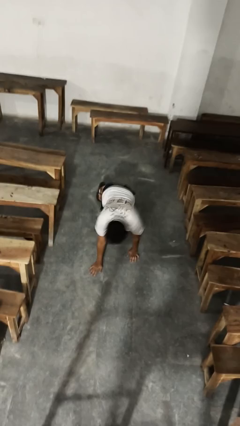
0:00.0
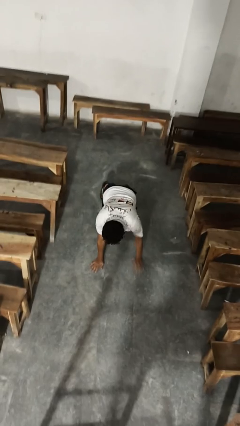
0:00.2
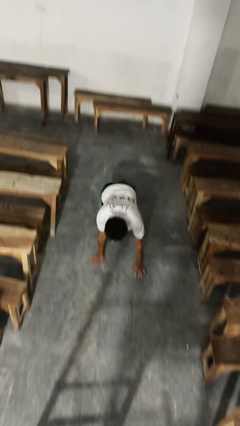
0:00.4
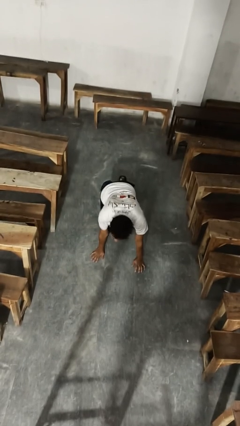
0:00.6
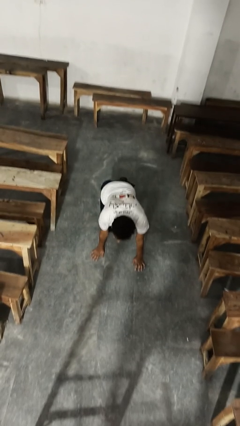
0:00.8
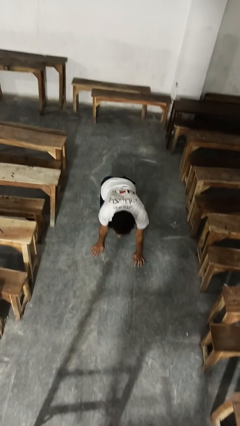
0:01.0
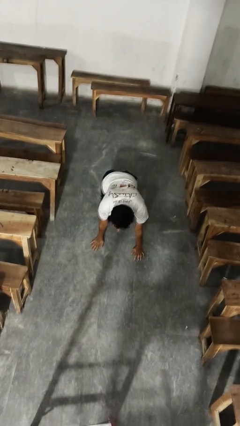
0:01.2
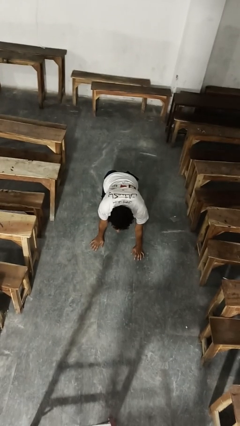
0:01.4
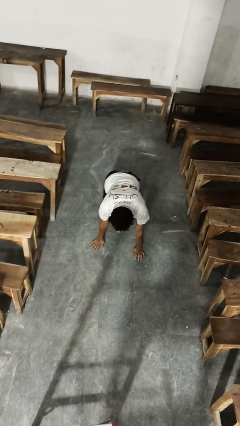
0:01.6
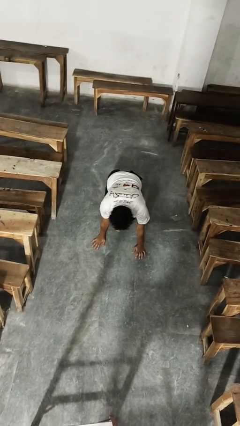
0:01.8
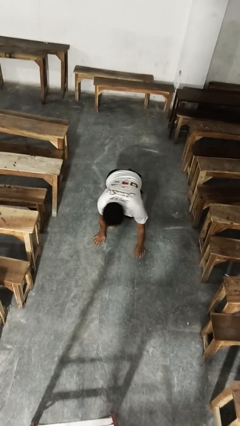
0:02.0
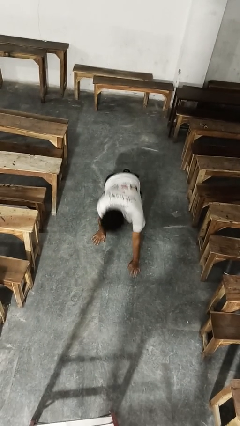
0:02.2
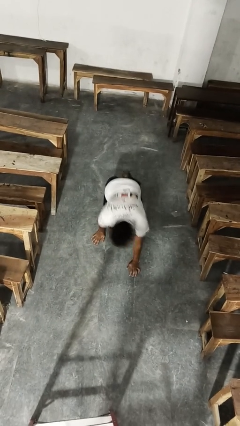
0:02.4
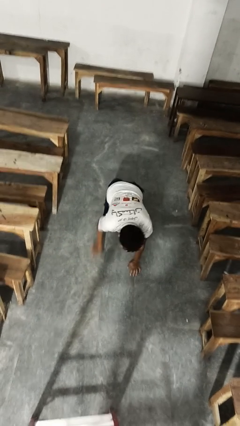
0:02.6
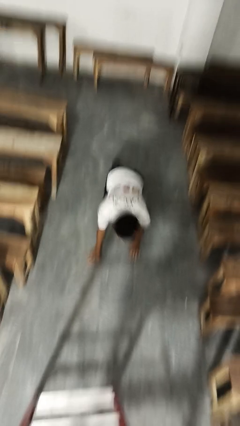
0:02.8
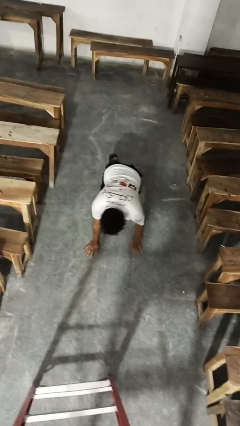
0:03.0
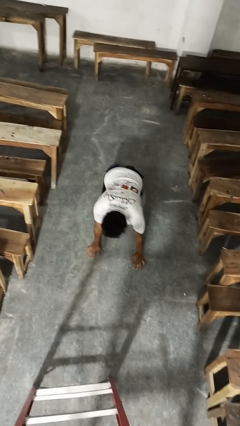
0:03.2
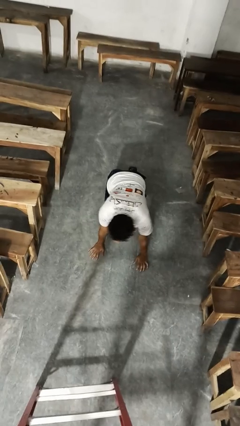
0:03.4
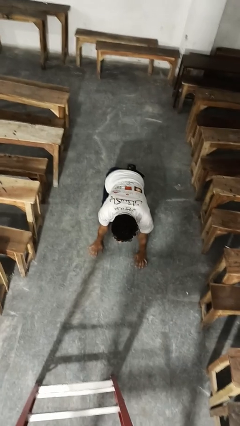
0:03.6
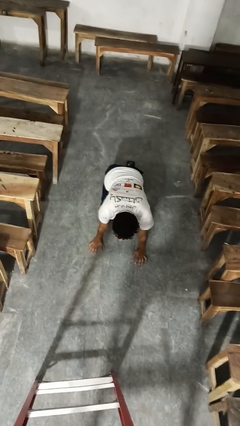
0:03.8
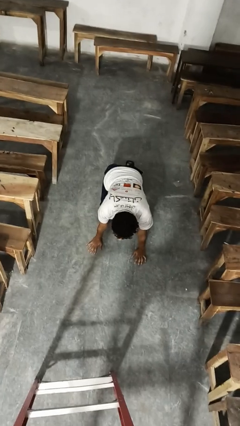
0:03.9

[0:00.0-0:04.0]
person crawls

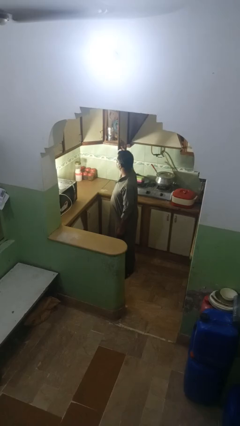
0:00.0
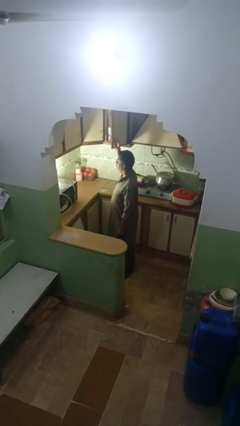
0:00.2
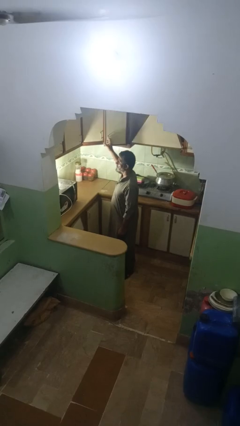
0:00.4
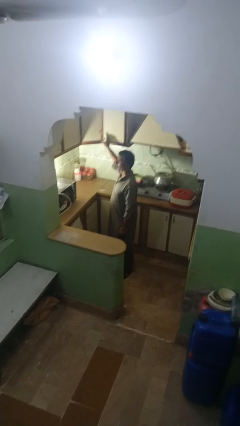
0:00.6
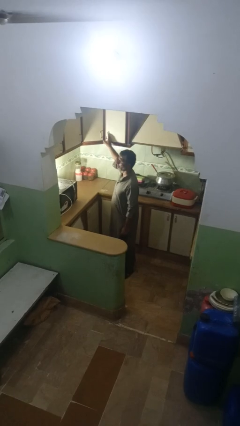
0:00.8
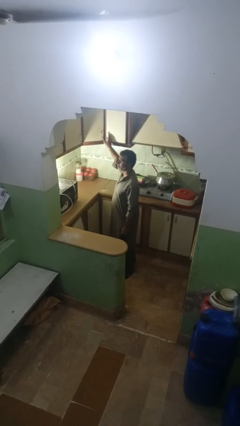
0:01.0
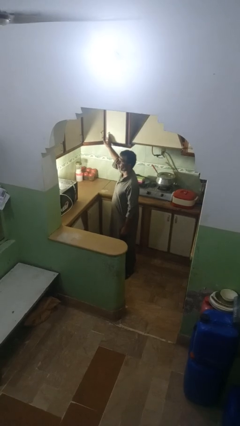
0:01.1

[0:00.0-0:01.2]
person closes kitchen drawer

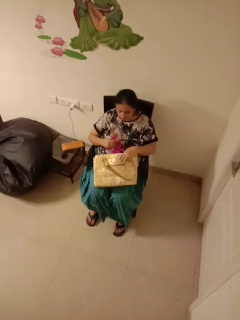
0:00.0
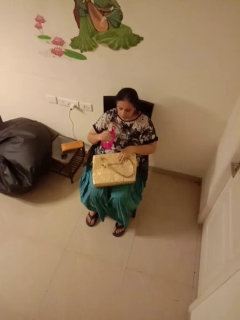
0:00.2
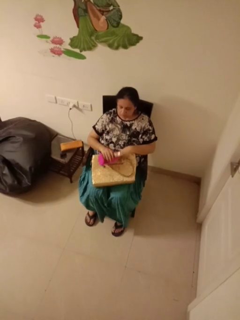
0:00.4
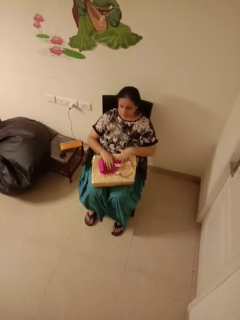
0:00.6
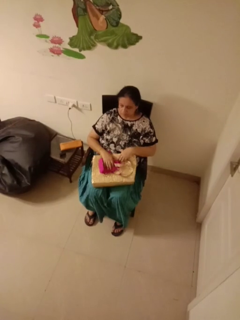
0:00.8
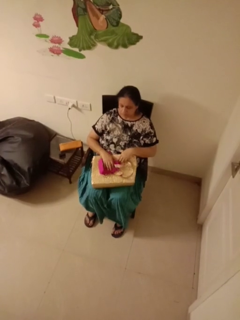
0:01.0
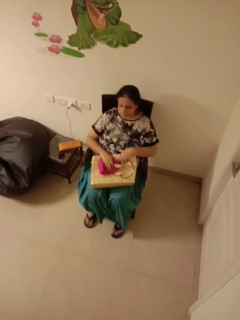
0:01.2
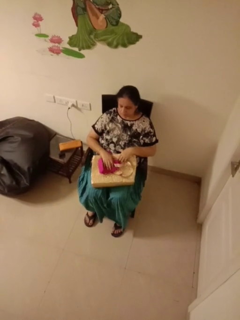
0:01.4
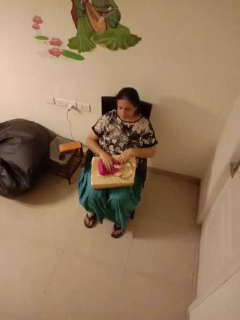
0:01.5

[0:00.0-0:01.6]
person takes object from purse

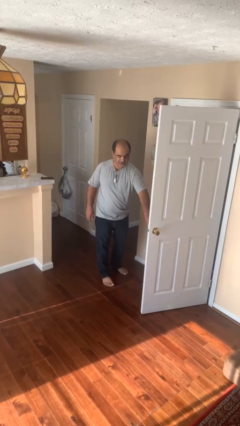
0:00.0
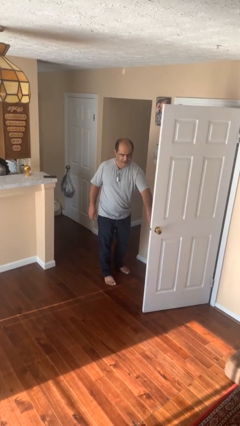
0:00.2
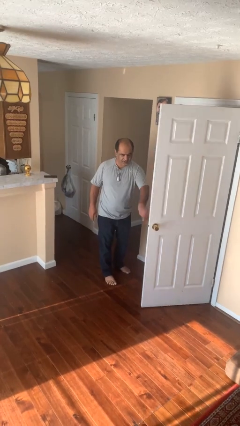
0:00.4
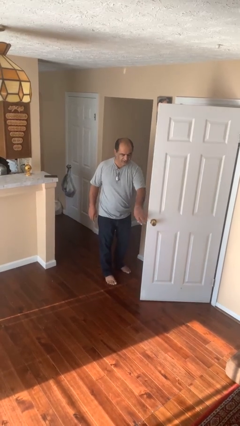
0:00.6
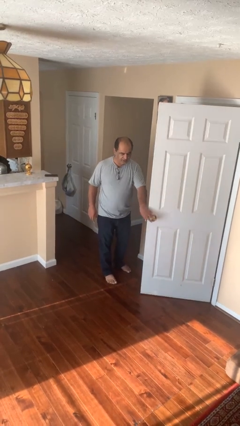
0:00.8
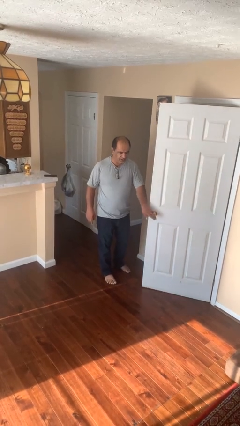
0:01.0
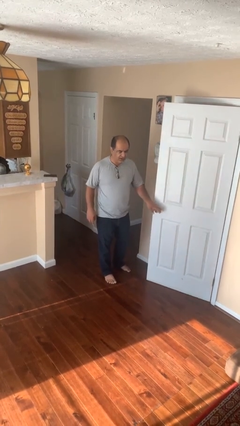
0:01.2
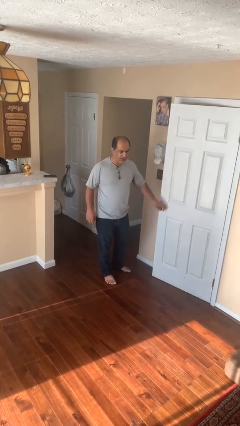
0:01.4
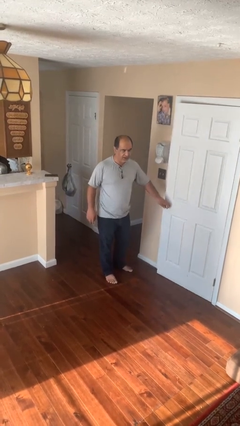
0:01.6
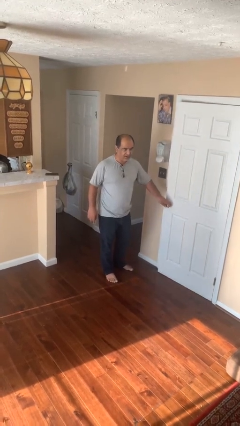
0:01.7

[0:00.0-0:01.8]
person closes facility door

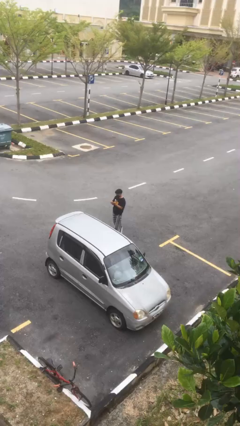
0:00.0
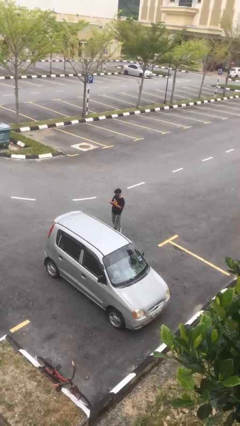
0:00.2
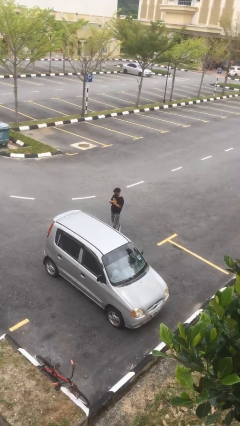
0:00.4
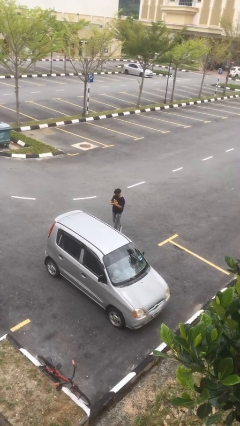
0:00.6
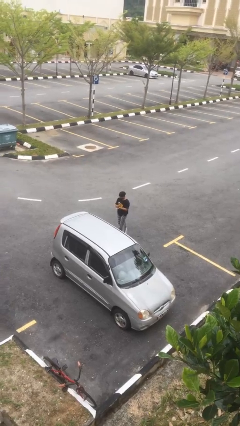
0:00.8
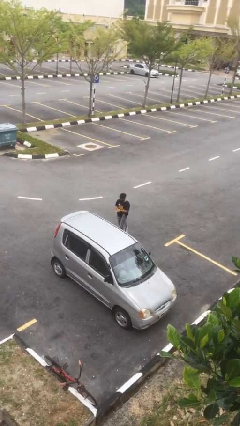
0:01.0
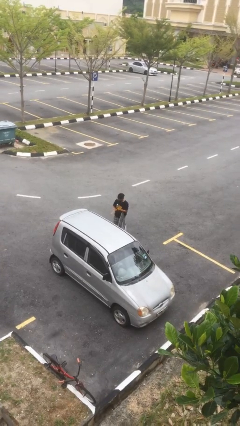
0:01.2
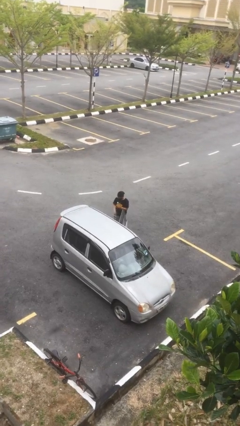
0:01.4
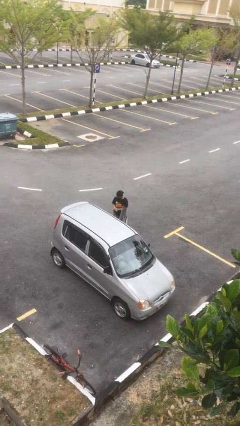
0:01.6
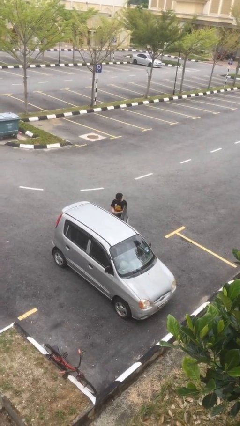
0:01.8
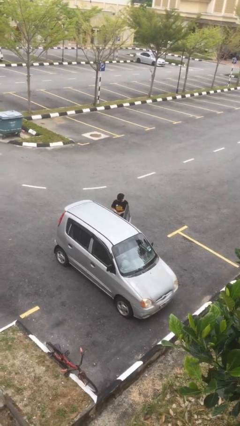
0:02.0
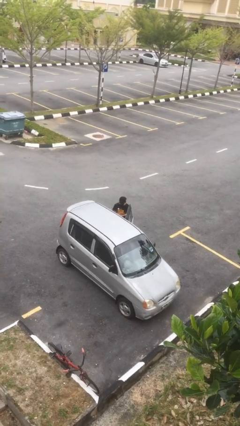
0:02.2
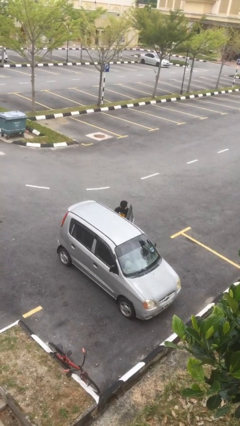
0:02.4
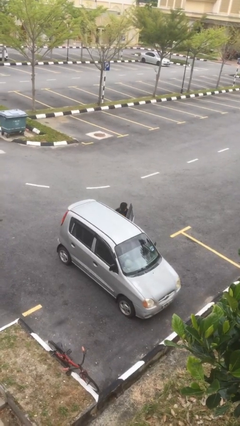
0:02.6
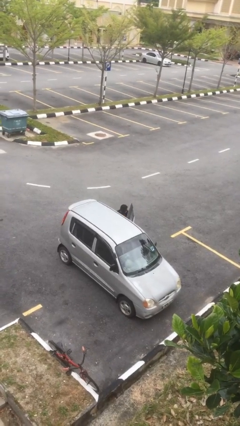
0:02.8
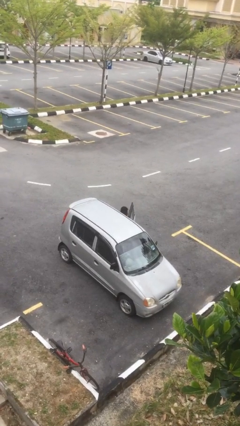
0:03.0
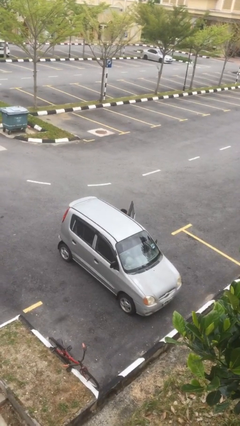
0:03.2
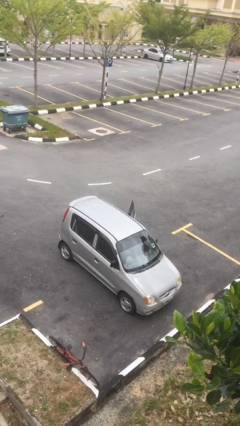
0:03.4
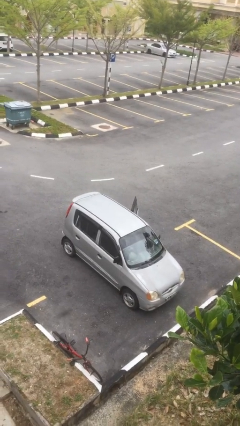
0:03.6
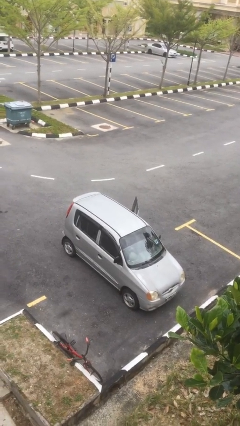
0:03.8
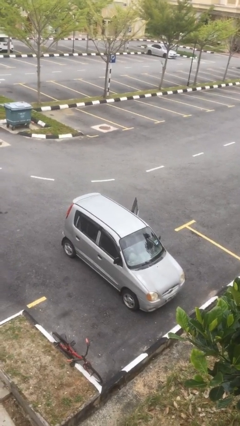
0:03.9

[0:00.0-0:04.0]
person enters car

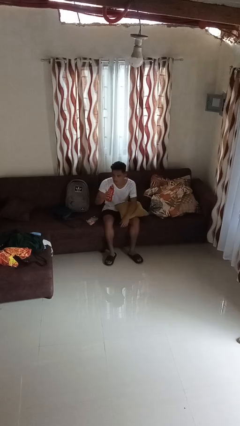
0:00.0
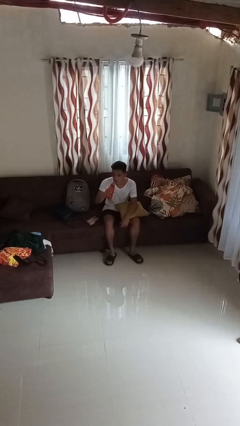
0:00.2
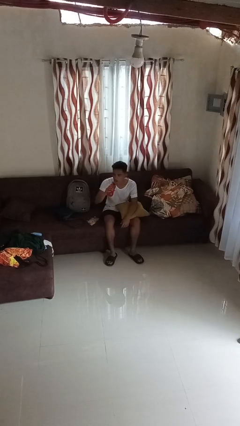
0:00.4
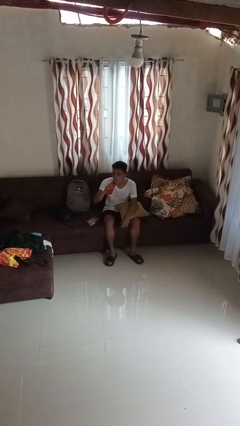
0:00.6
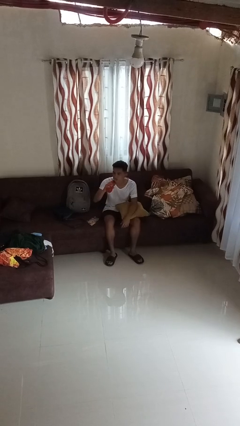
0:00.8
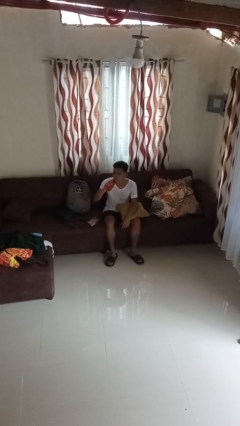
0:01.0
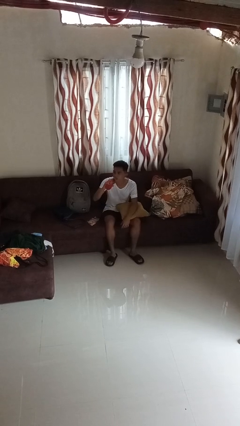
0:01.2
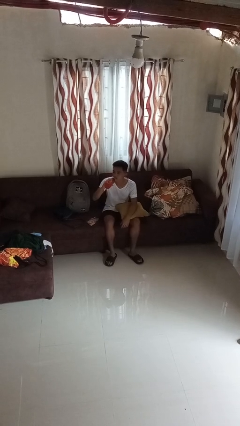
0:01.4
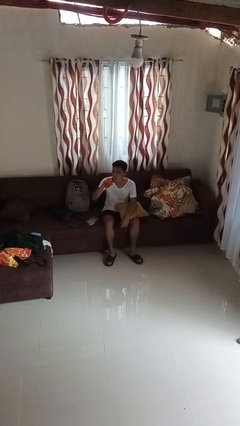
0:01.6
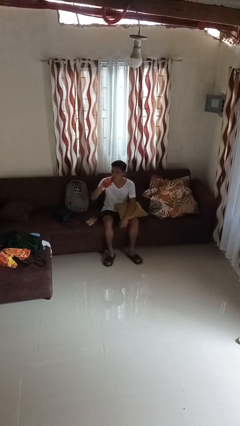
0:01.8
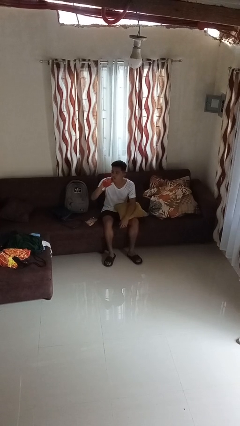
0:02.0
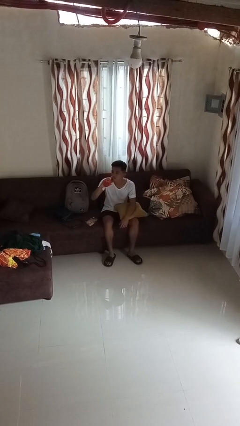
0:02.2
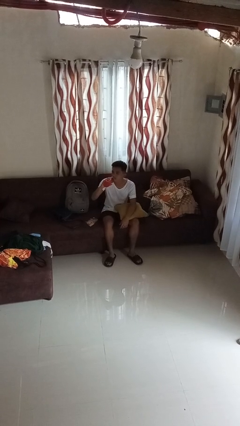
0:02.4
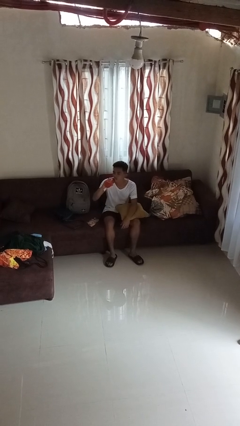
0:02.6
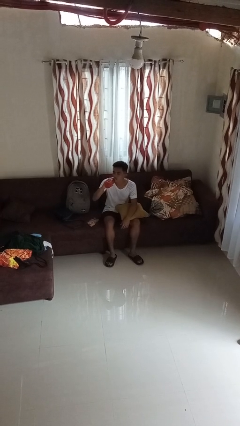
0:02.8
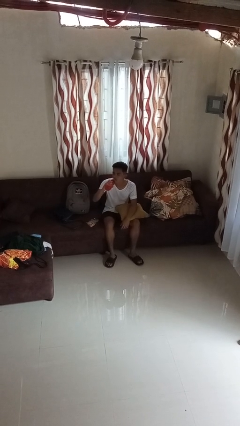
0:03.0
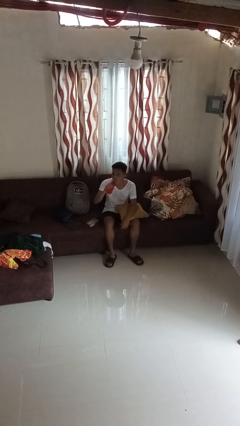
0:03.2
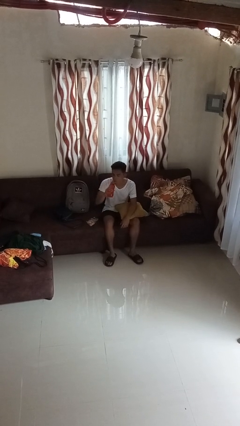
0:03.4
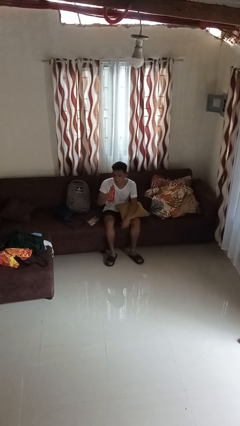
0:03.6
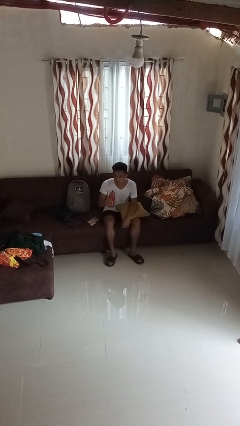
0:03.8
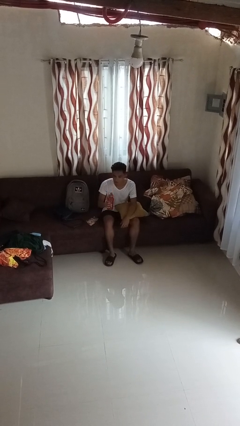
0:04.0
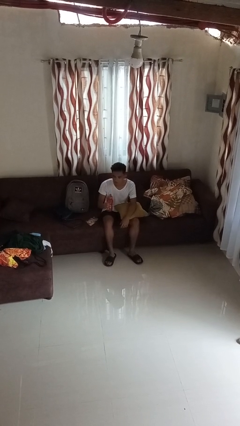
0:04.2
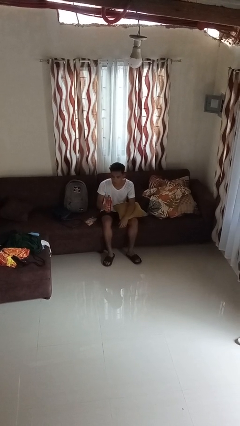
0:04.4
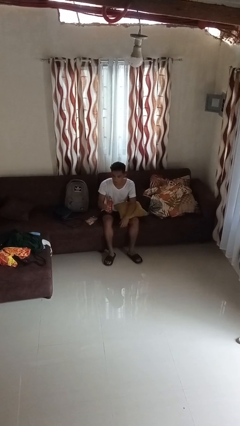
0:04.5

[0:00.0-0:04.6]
person drinks from bottle

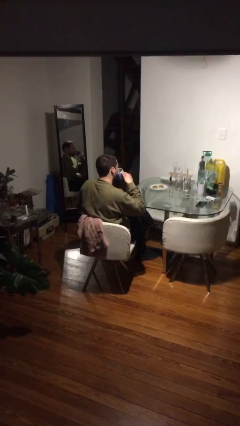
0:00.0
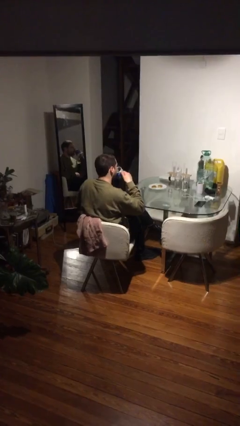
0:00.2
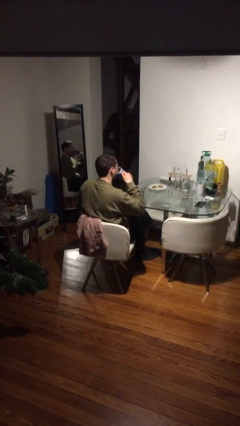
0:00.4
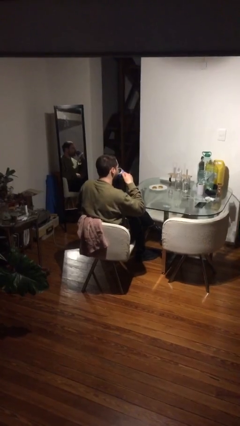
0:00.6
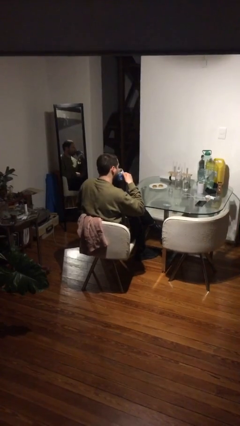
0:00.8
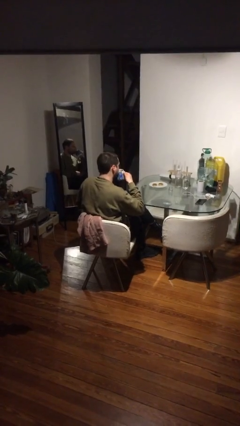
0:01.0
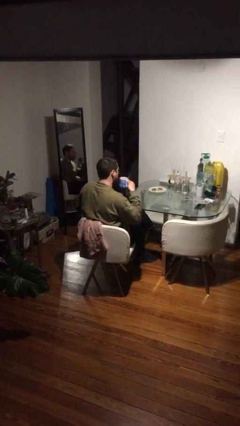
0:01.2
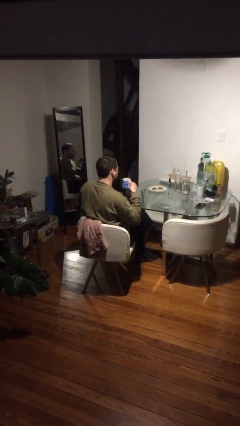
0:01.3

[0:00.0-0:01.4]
person drinks from mug
